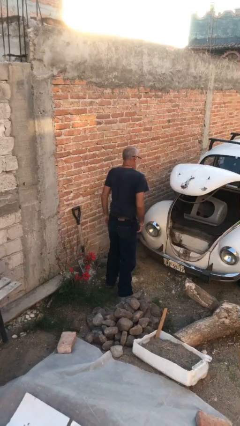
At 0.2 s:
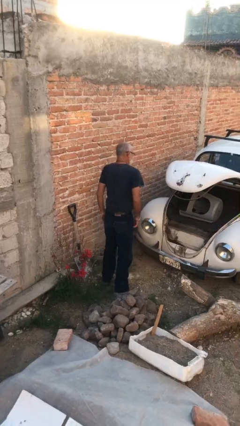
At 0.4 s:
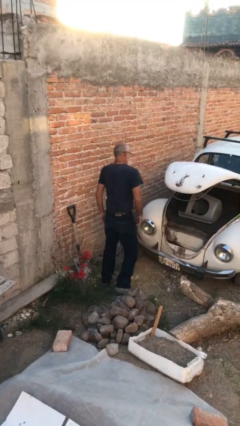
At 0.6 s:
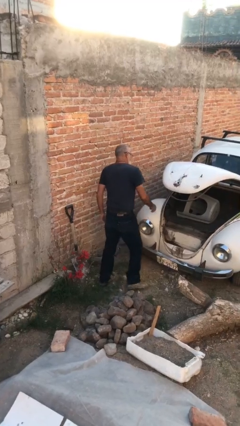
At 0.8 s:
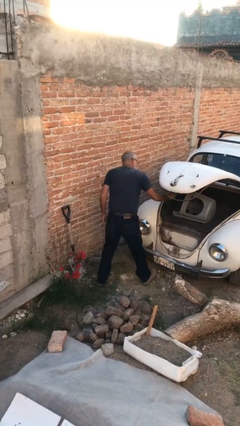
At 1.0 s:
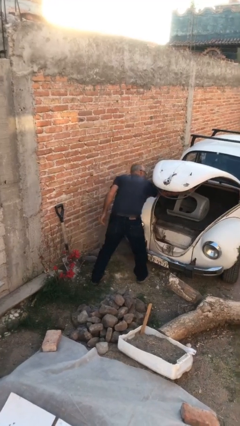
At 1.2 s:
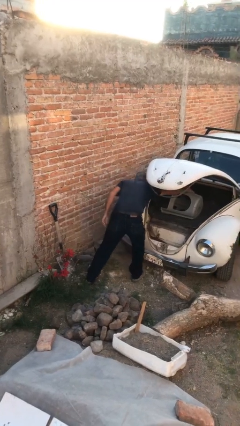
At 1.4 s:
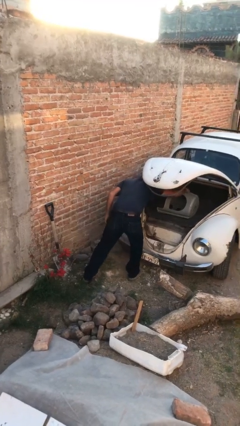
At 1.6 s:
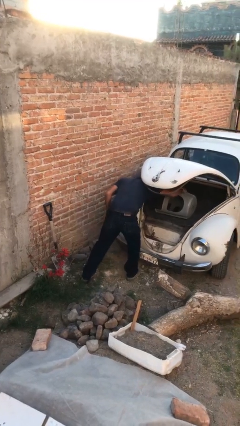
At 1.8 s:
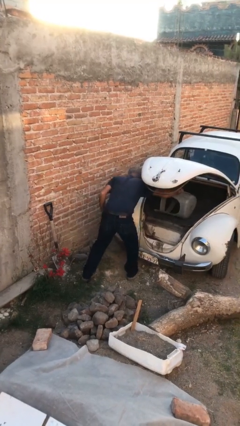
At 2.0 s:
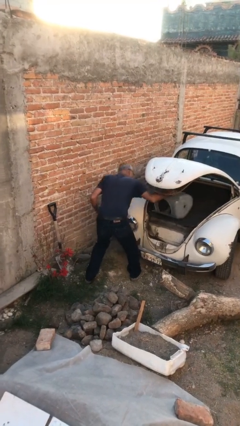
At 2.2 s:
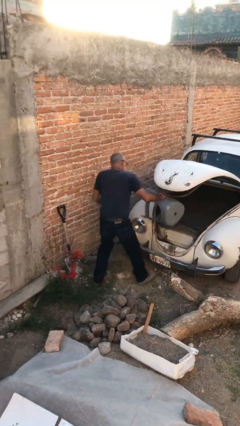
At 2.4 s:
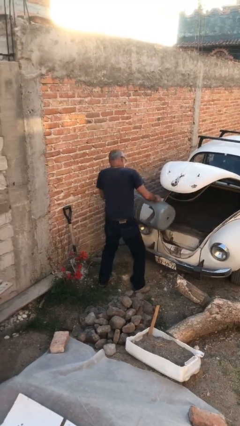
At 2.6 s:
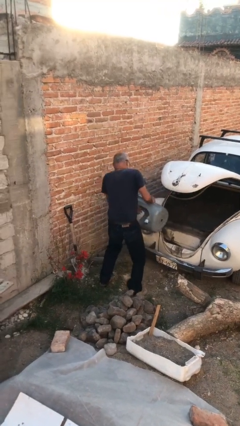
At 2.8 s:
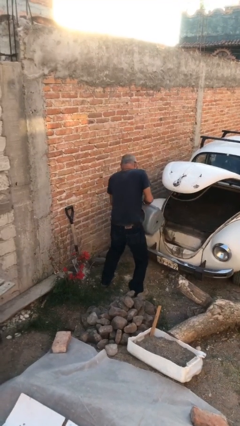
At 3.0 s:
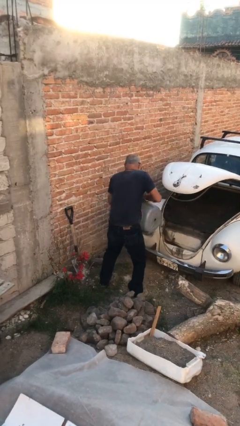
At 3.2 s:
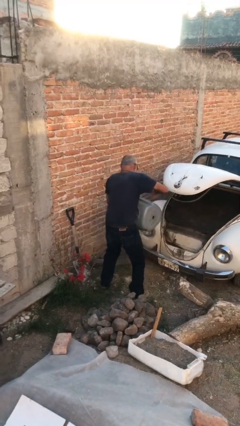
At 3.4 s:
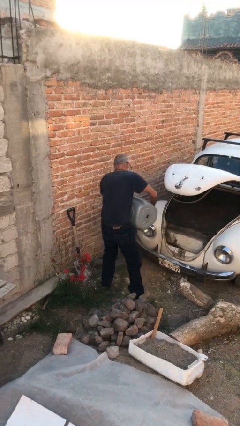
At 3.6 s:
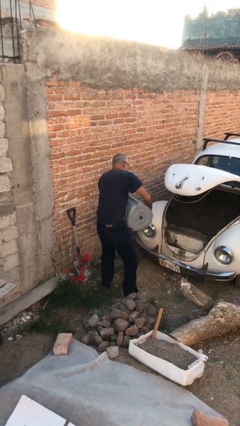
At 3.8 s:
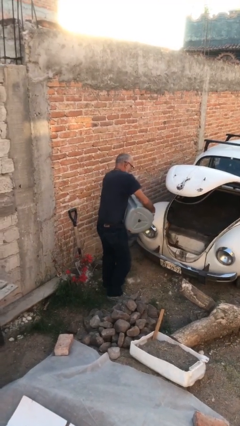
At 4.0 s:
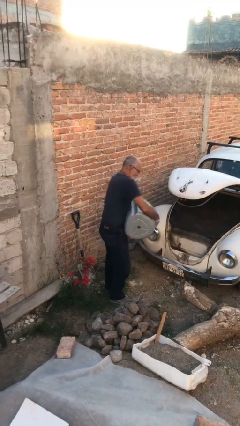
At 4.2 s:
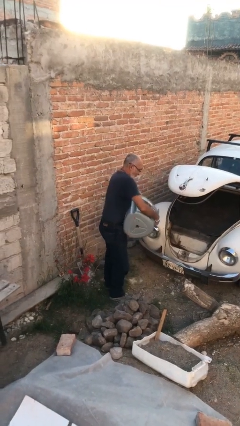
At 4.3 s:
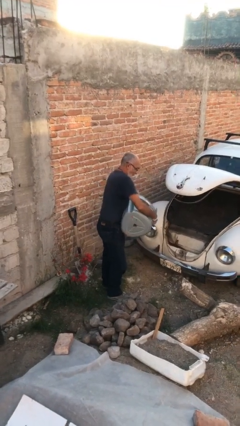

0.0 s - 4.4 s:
person unloads car

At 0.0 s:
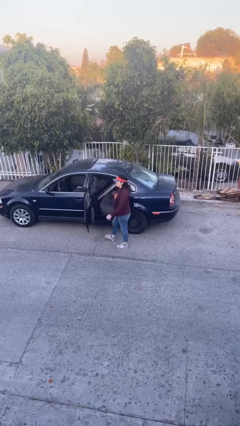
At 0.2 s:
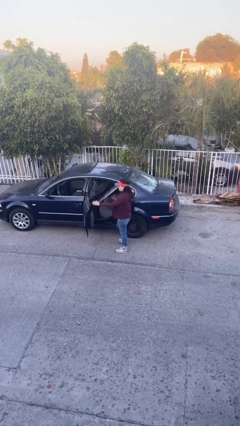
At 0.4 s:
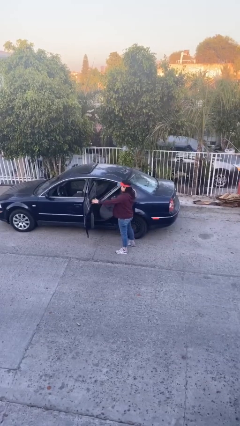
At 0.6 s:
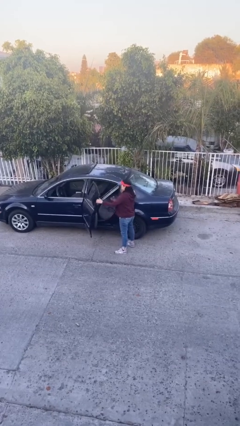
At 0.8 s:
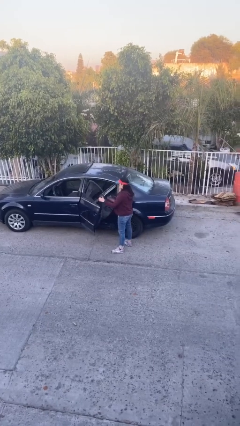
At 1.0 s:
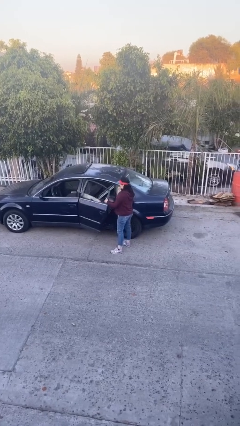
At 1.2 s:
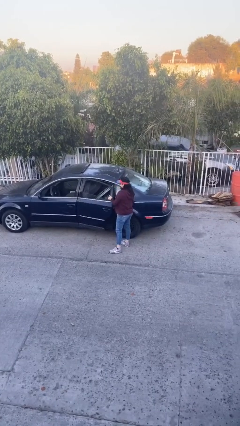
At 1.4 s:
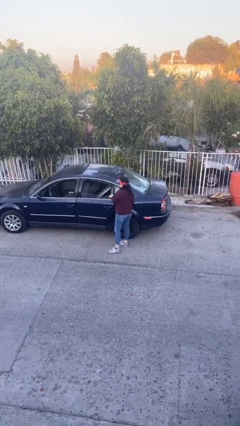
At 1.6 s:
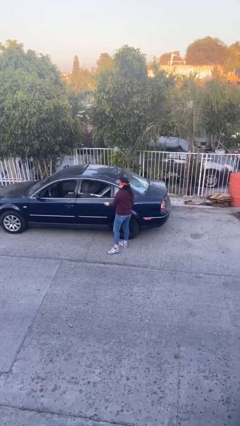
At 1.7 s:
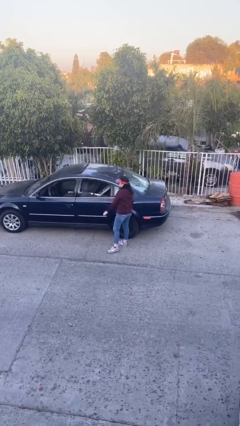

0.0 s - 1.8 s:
person closes car door

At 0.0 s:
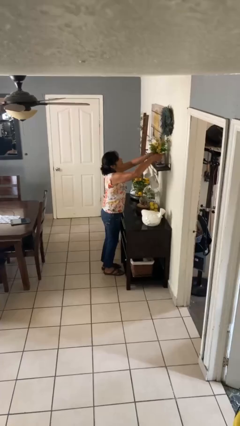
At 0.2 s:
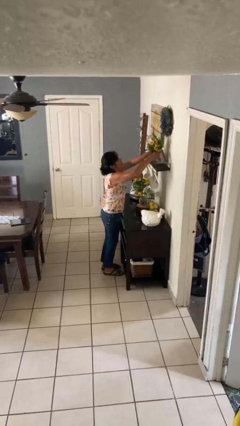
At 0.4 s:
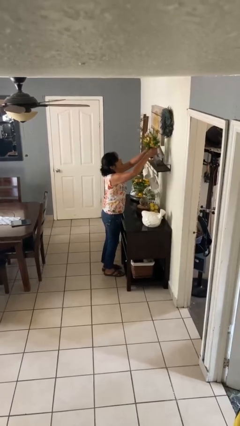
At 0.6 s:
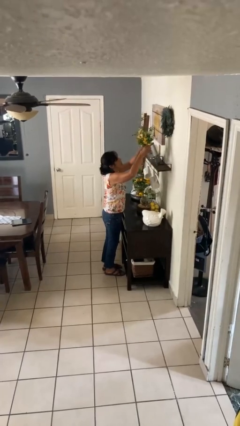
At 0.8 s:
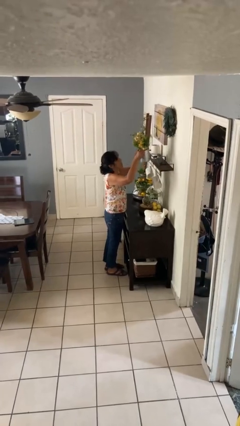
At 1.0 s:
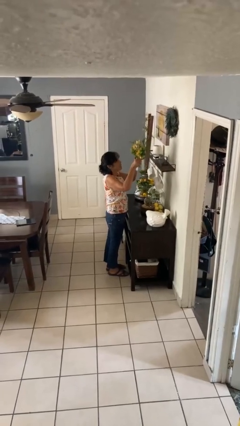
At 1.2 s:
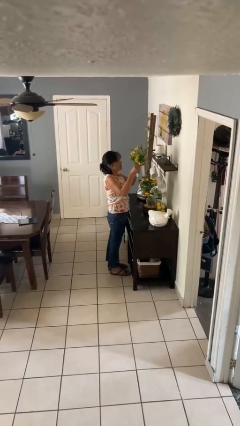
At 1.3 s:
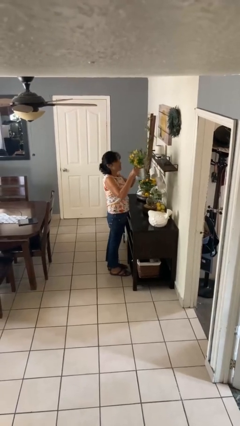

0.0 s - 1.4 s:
person picks up object from countertop

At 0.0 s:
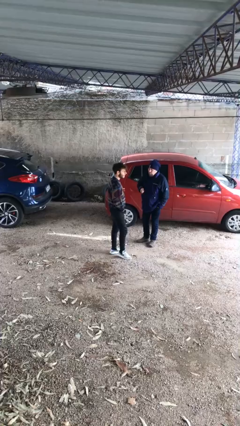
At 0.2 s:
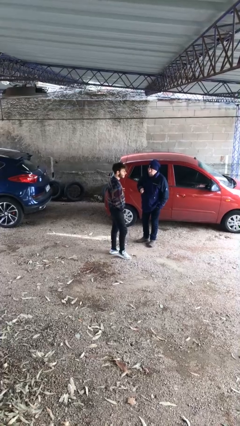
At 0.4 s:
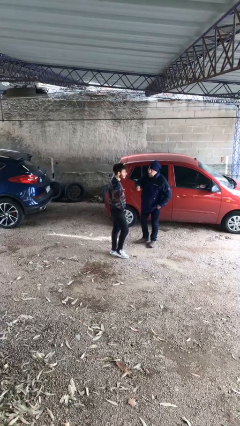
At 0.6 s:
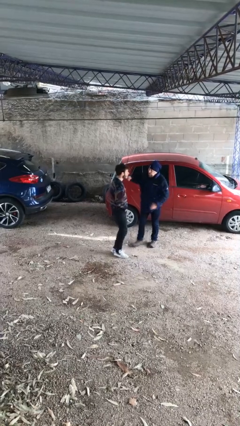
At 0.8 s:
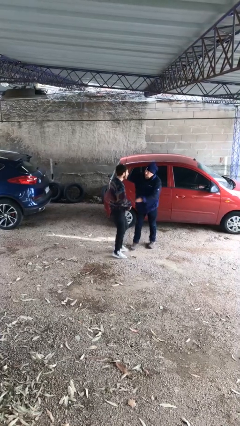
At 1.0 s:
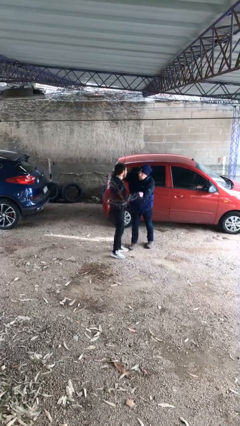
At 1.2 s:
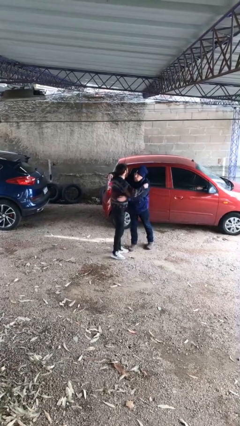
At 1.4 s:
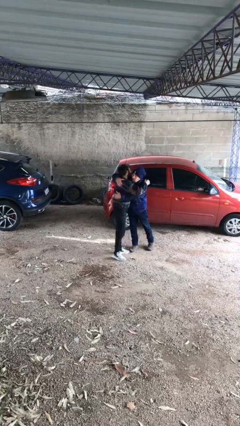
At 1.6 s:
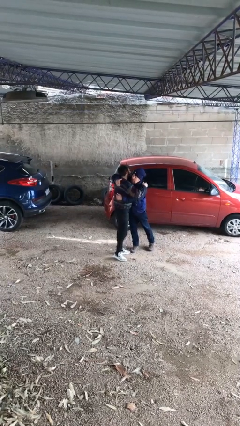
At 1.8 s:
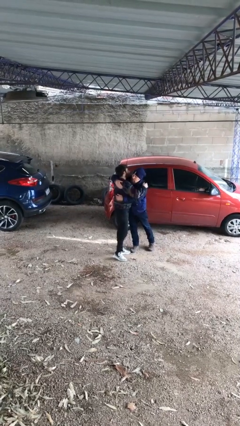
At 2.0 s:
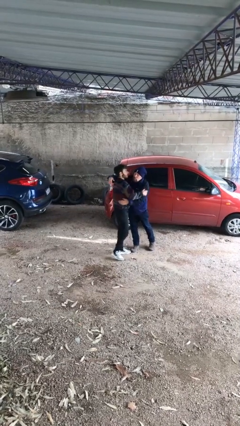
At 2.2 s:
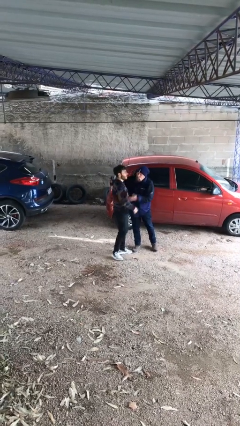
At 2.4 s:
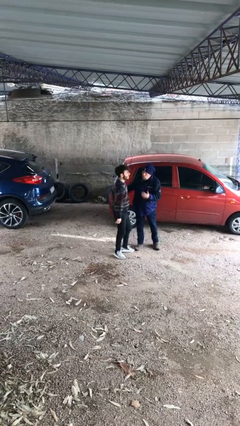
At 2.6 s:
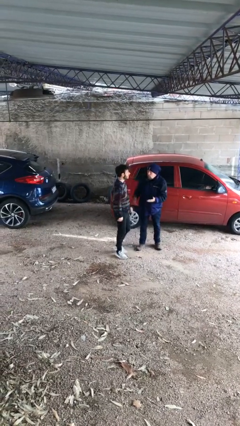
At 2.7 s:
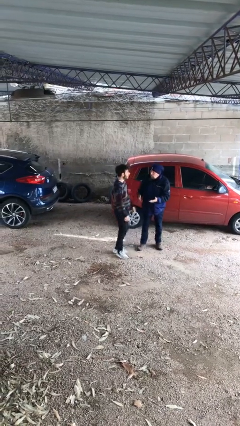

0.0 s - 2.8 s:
person embraces person

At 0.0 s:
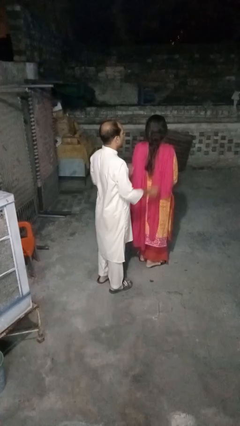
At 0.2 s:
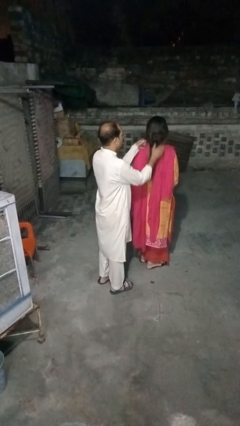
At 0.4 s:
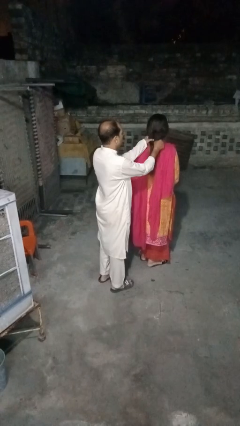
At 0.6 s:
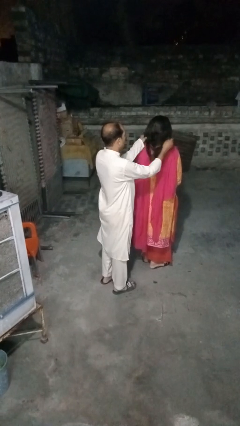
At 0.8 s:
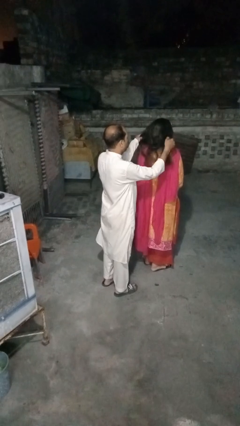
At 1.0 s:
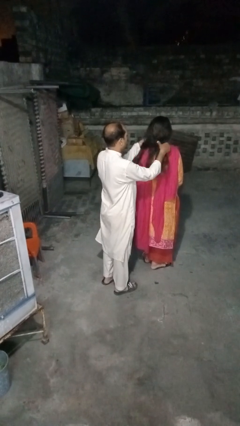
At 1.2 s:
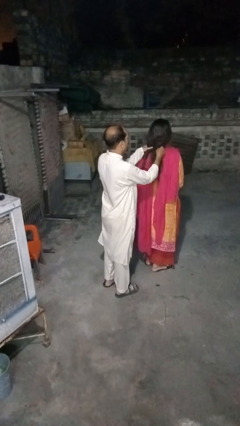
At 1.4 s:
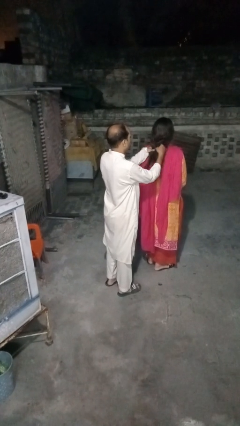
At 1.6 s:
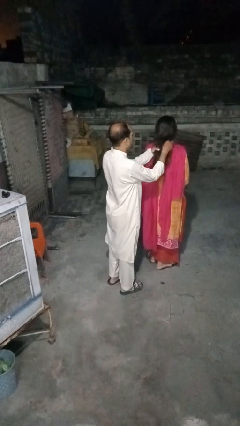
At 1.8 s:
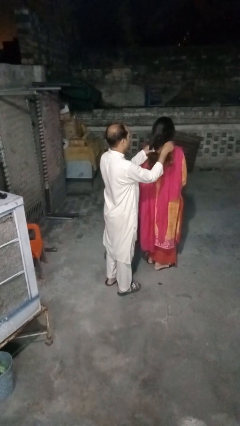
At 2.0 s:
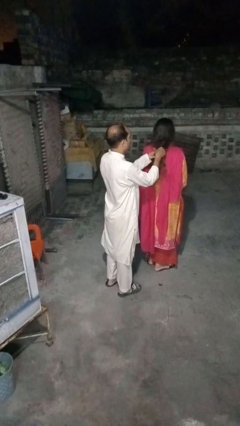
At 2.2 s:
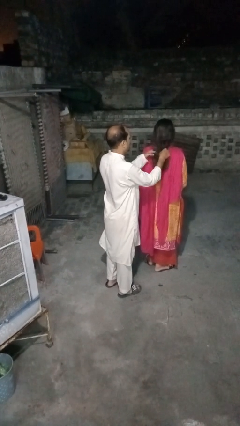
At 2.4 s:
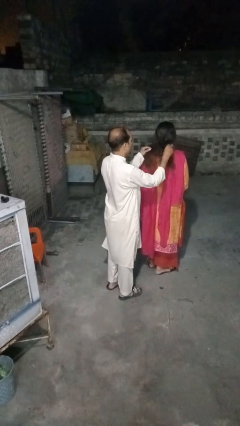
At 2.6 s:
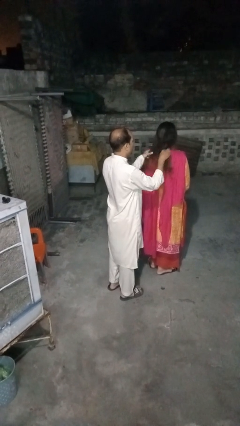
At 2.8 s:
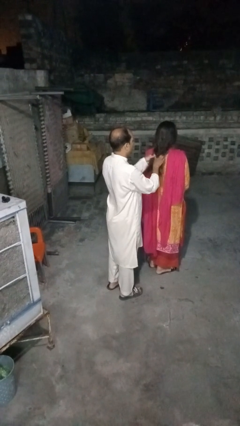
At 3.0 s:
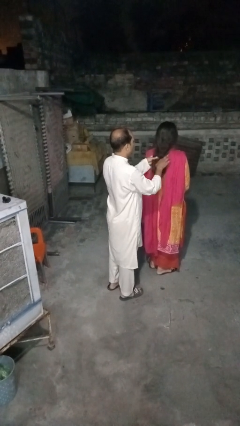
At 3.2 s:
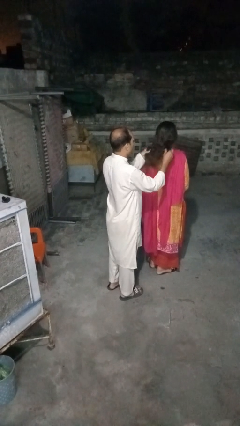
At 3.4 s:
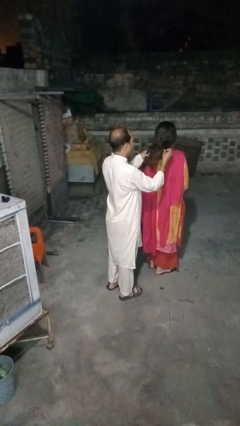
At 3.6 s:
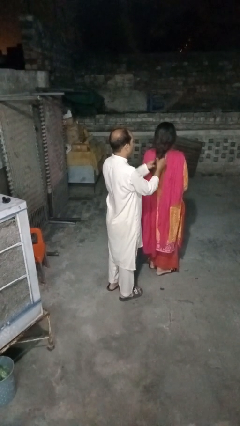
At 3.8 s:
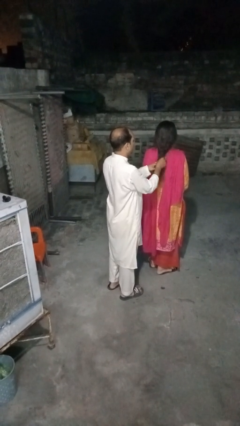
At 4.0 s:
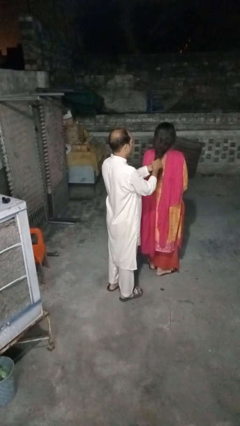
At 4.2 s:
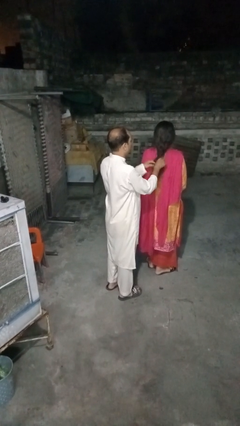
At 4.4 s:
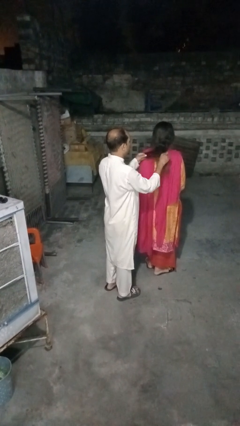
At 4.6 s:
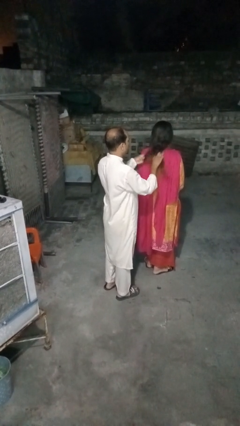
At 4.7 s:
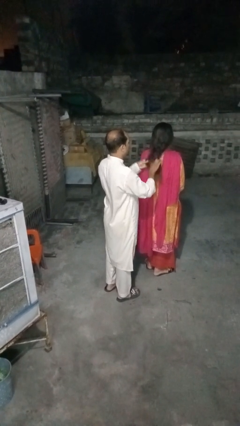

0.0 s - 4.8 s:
person braids hair of person

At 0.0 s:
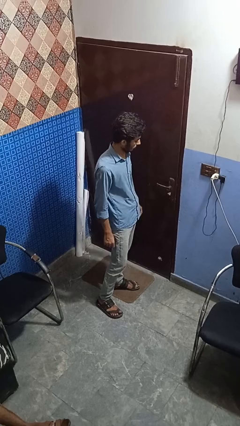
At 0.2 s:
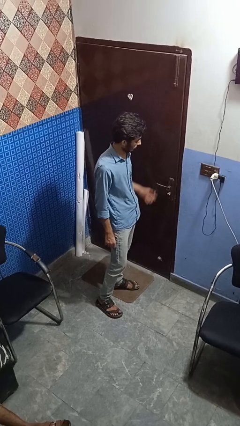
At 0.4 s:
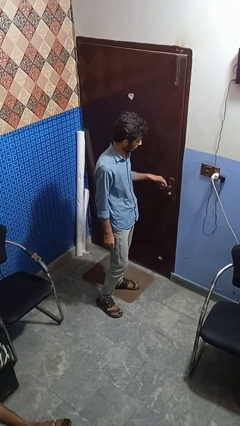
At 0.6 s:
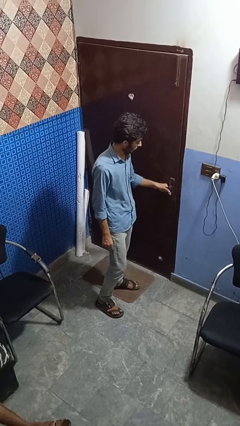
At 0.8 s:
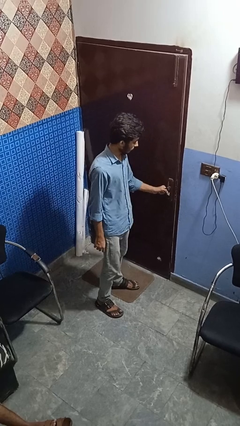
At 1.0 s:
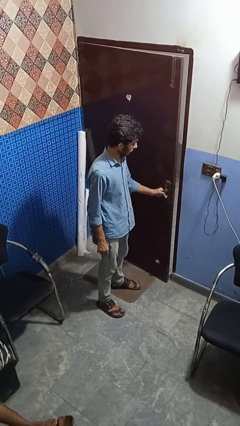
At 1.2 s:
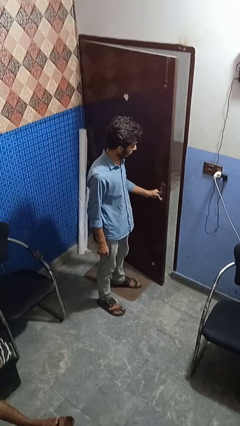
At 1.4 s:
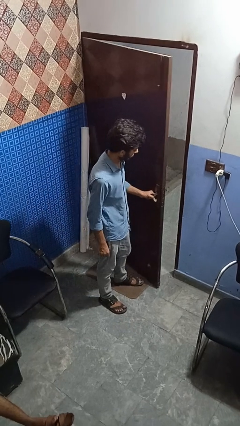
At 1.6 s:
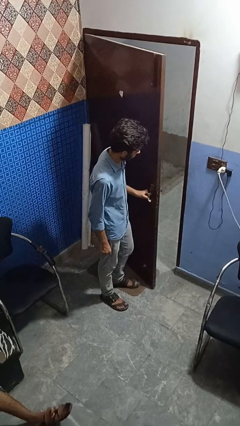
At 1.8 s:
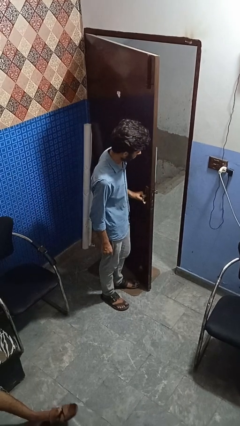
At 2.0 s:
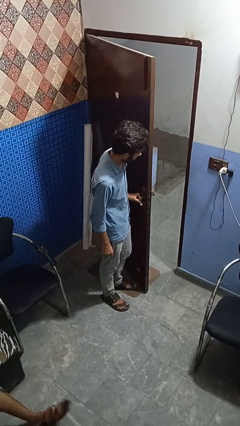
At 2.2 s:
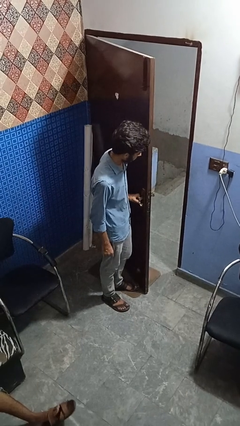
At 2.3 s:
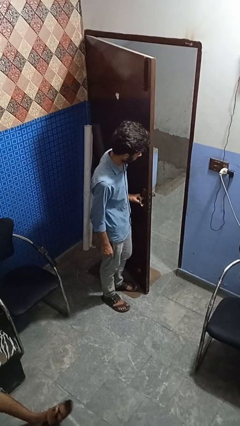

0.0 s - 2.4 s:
person opens facility door
